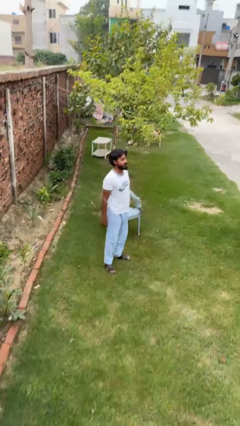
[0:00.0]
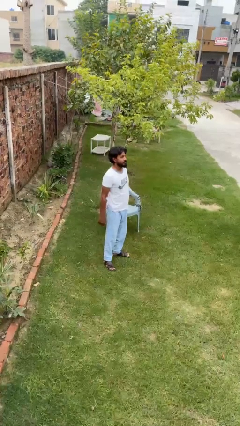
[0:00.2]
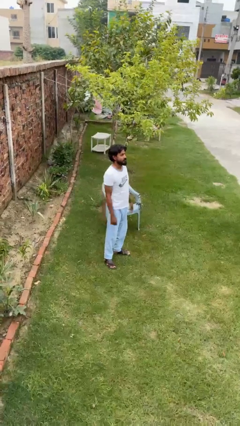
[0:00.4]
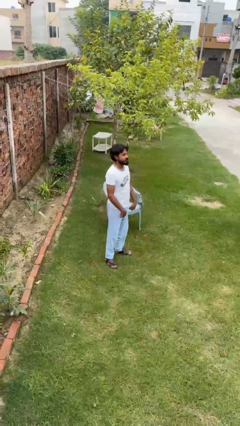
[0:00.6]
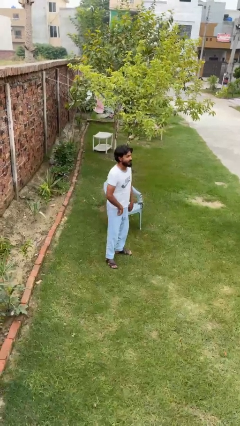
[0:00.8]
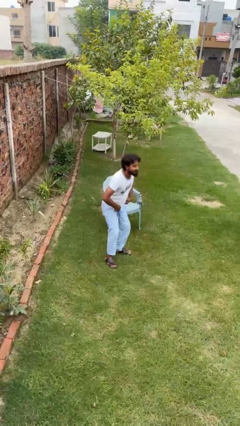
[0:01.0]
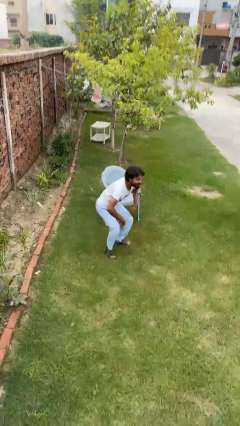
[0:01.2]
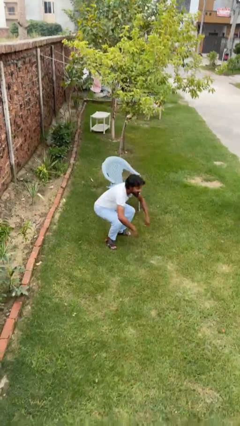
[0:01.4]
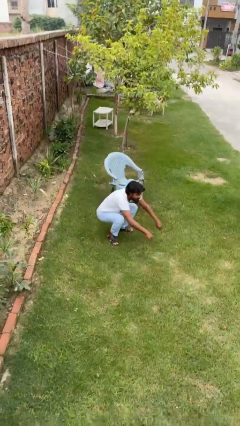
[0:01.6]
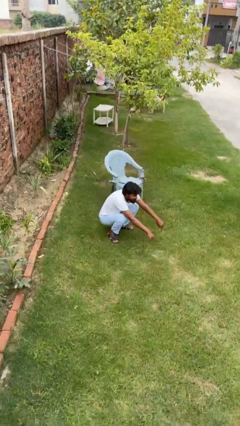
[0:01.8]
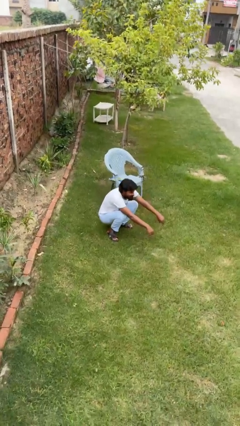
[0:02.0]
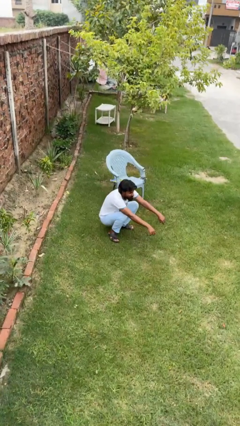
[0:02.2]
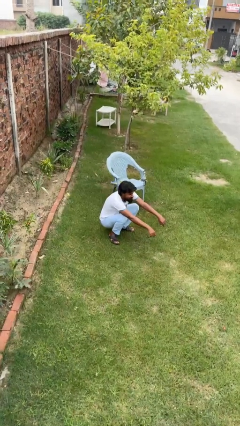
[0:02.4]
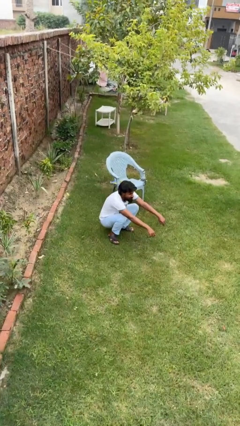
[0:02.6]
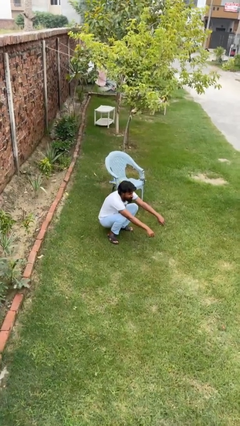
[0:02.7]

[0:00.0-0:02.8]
person squats

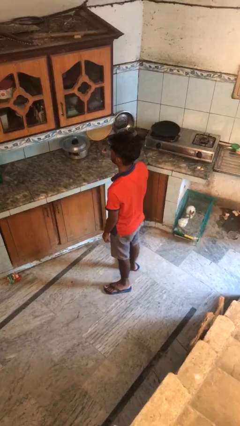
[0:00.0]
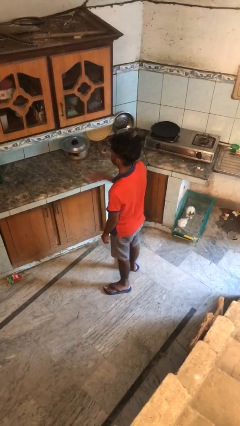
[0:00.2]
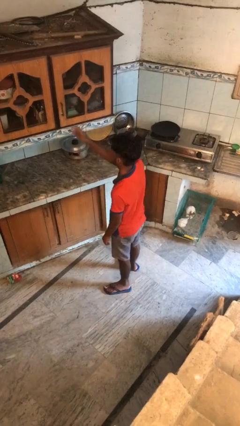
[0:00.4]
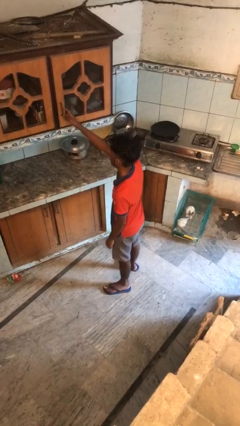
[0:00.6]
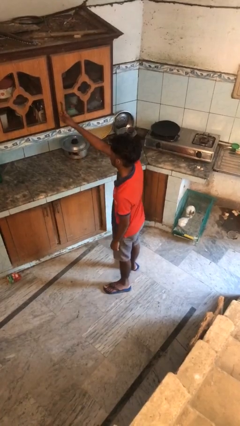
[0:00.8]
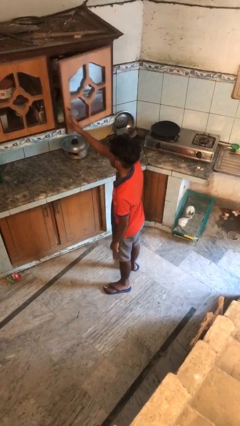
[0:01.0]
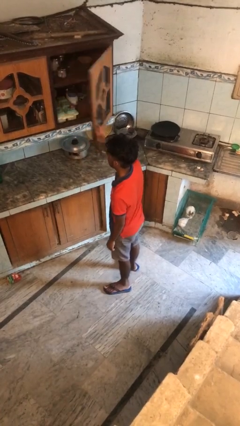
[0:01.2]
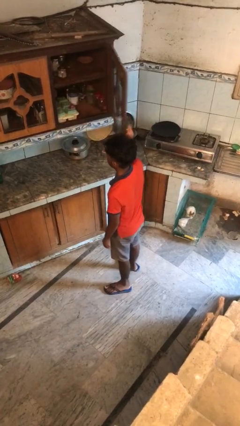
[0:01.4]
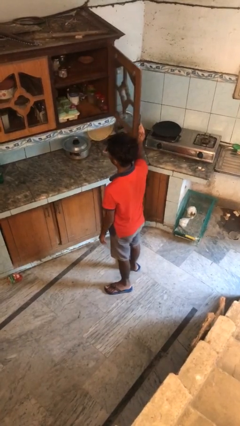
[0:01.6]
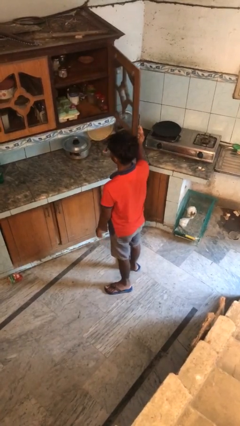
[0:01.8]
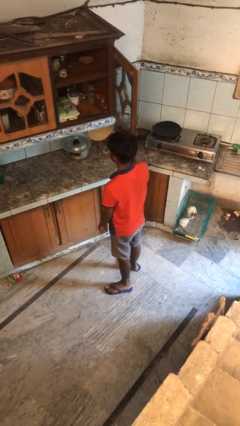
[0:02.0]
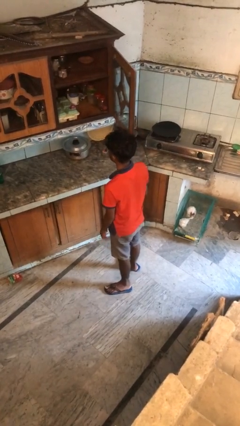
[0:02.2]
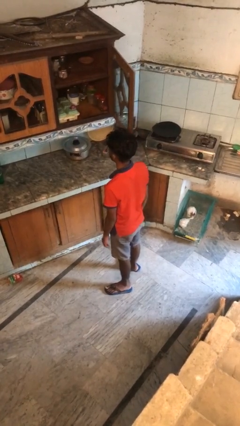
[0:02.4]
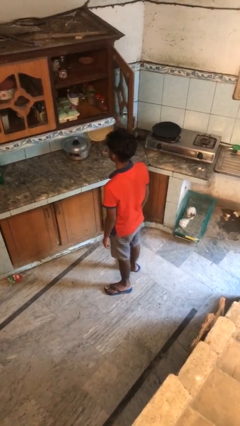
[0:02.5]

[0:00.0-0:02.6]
person opens cabinet

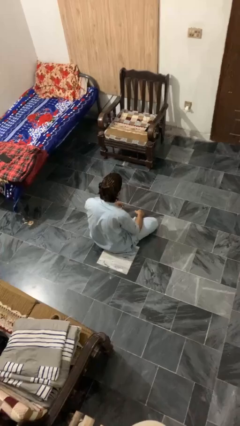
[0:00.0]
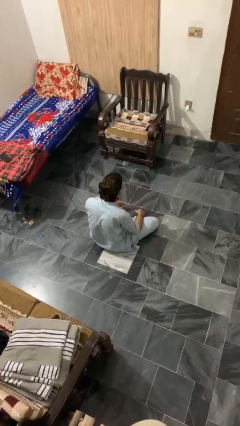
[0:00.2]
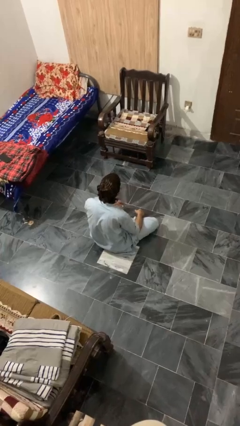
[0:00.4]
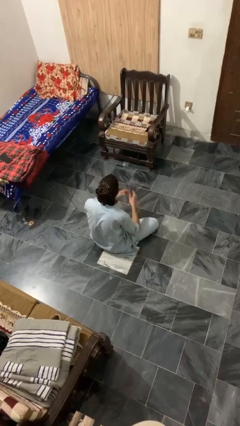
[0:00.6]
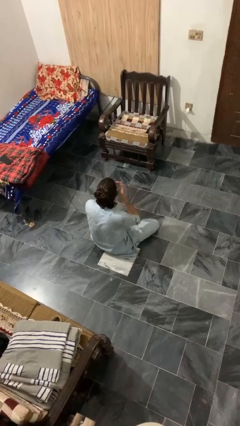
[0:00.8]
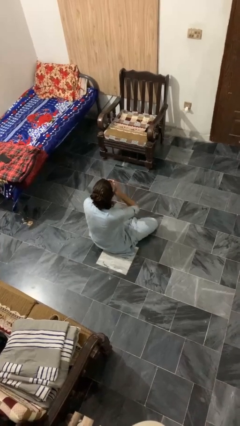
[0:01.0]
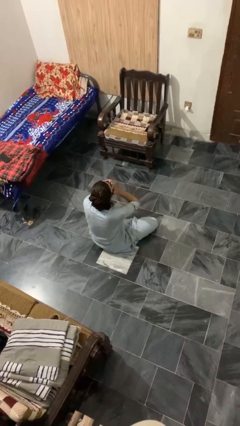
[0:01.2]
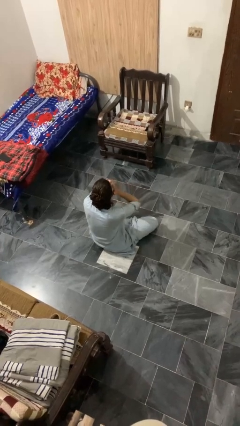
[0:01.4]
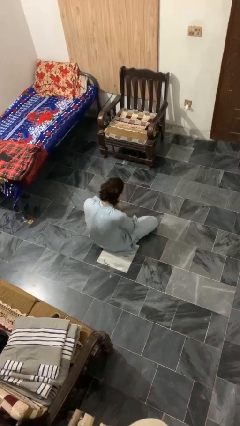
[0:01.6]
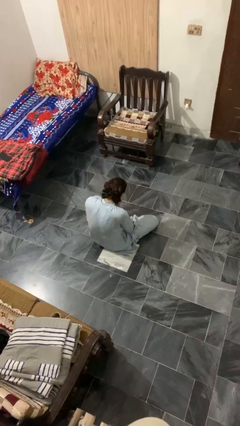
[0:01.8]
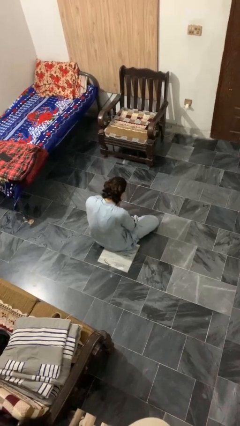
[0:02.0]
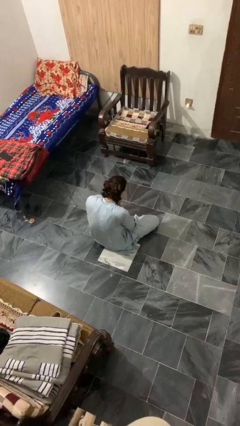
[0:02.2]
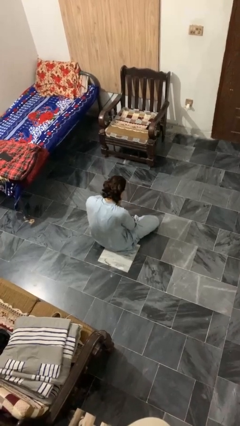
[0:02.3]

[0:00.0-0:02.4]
person sneezes into hand

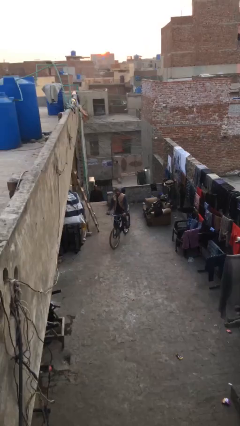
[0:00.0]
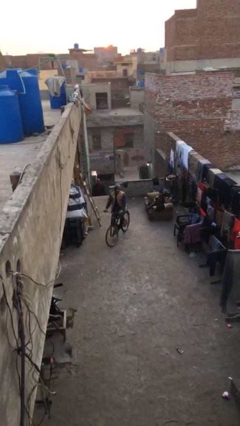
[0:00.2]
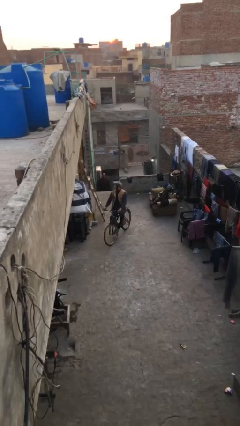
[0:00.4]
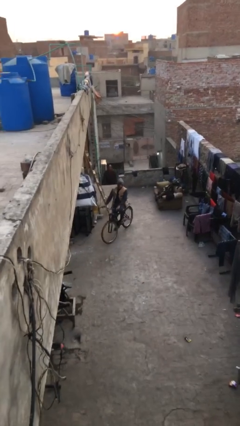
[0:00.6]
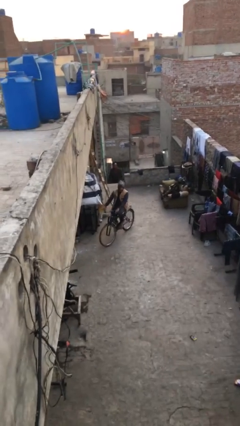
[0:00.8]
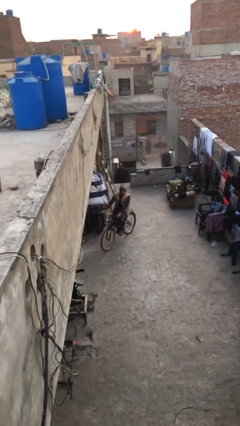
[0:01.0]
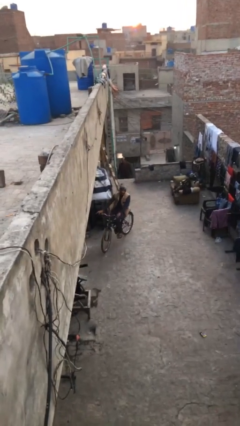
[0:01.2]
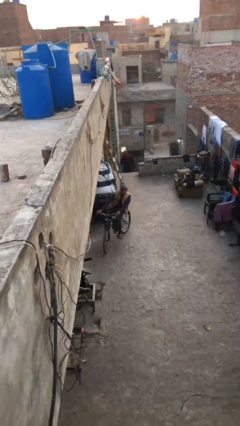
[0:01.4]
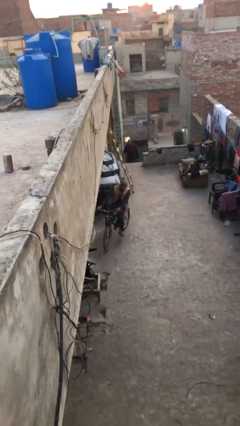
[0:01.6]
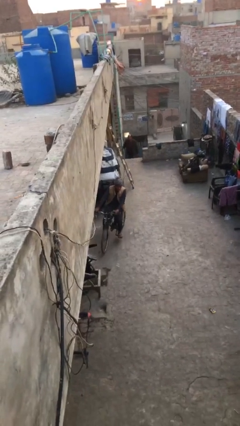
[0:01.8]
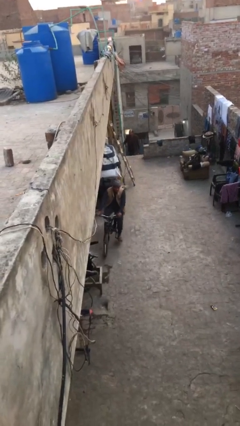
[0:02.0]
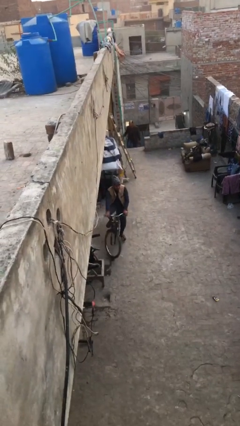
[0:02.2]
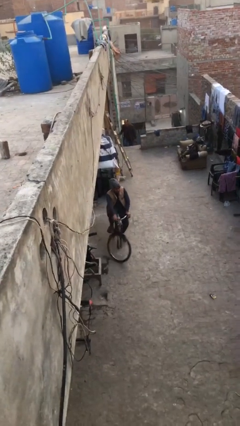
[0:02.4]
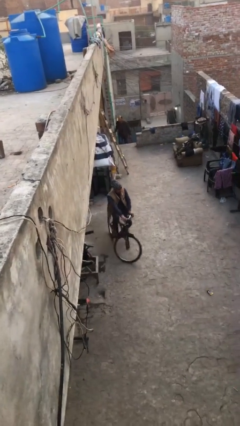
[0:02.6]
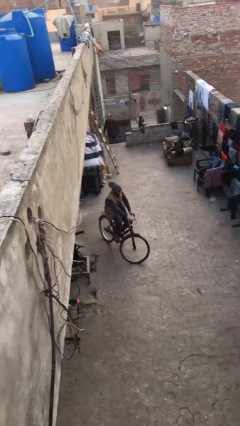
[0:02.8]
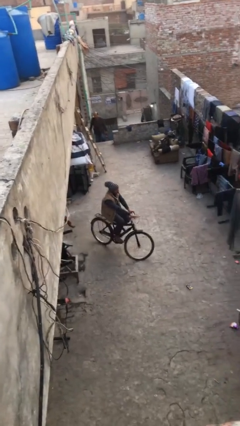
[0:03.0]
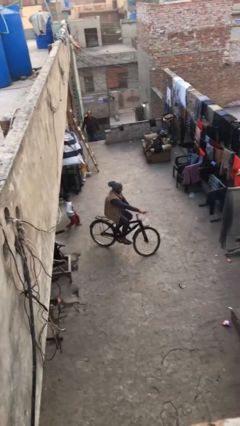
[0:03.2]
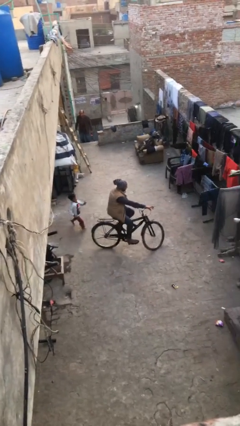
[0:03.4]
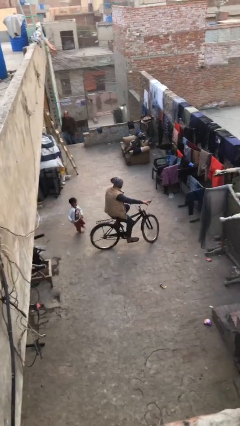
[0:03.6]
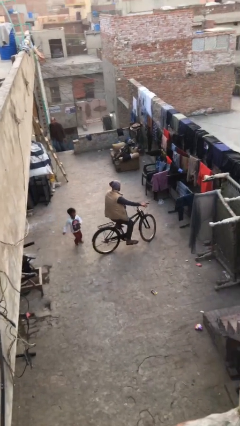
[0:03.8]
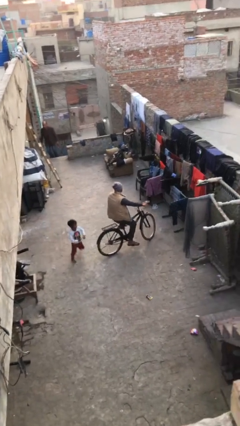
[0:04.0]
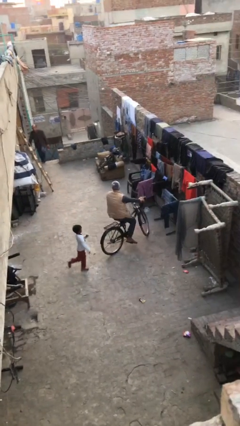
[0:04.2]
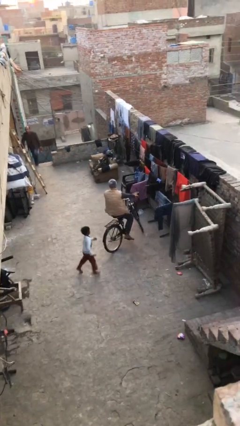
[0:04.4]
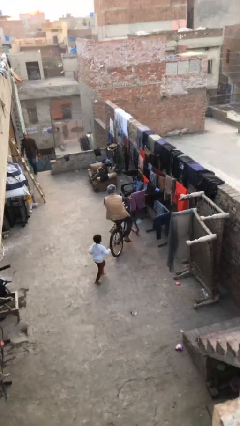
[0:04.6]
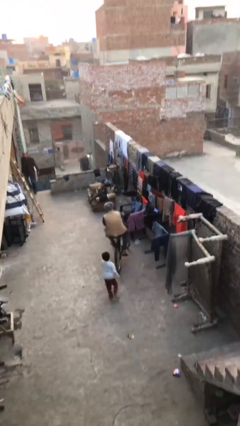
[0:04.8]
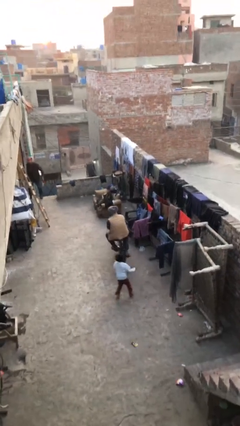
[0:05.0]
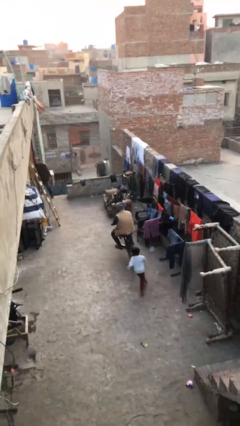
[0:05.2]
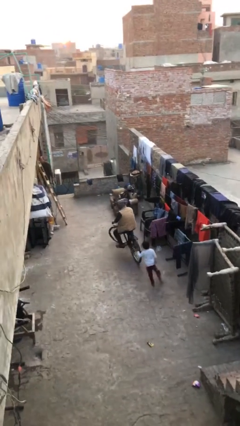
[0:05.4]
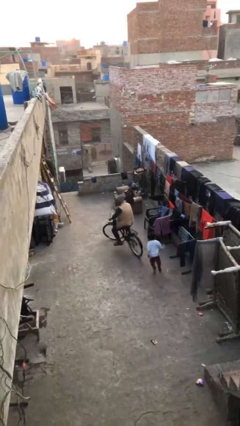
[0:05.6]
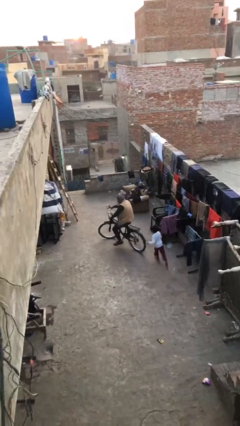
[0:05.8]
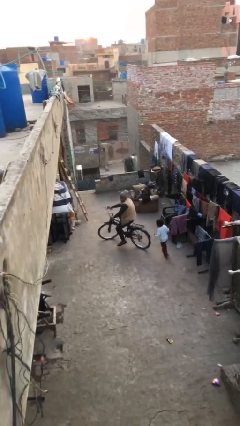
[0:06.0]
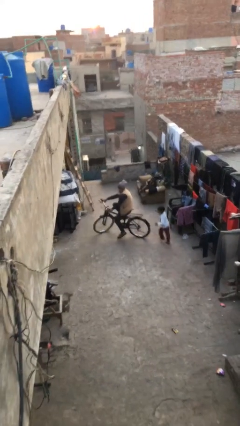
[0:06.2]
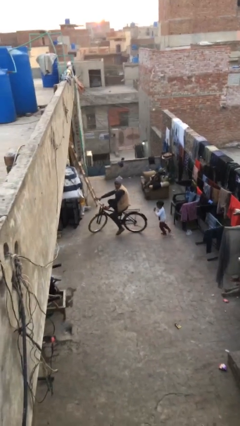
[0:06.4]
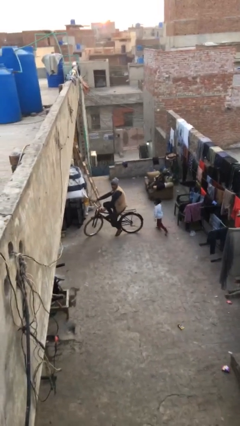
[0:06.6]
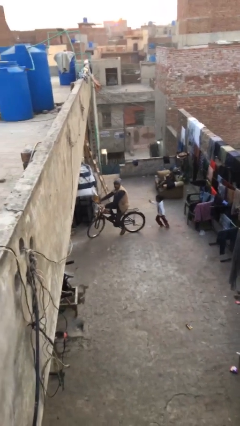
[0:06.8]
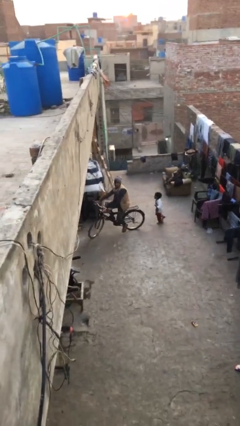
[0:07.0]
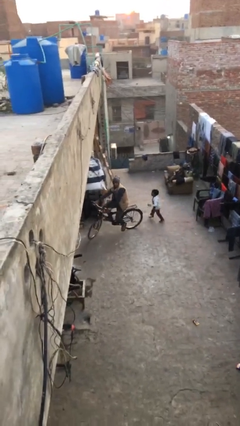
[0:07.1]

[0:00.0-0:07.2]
person rides bicycle

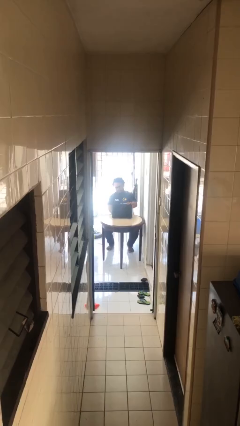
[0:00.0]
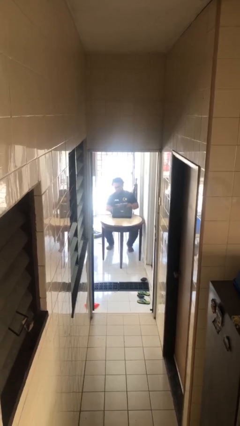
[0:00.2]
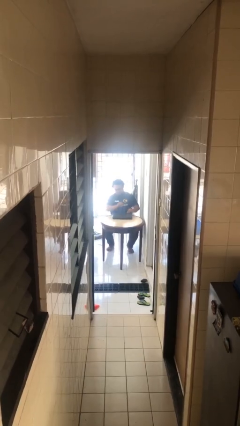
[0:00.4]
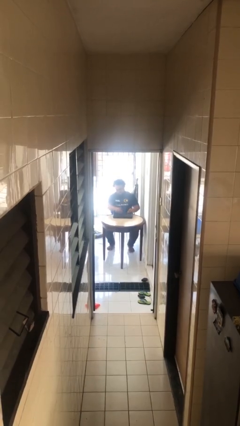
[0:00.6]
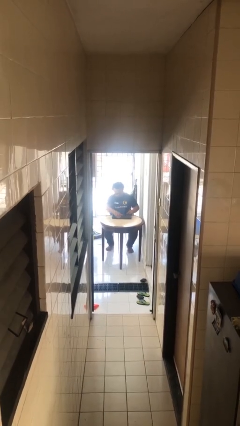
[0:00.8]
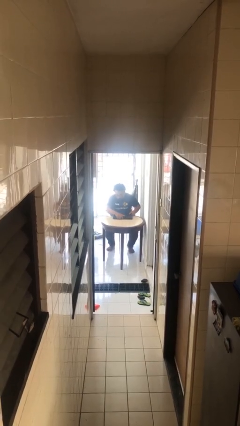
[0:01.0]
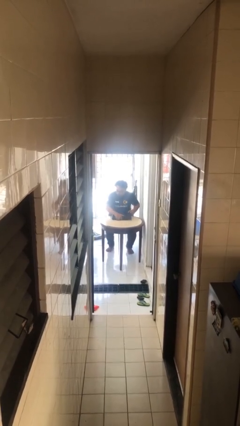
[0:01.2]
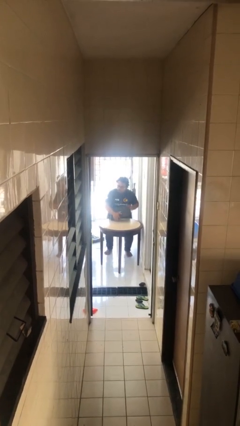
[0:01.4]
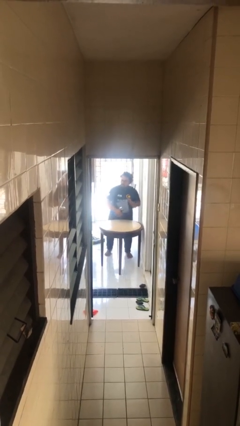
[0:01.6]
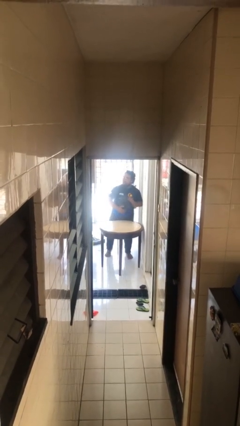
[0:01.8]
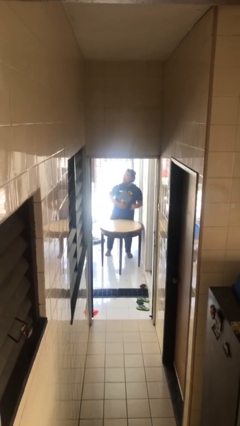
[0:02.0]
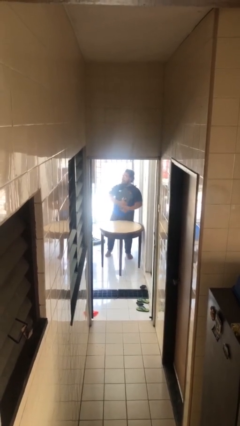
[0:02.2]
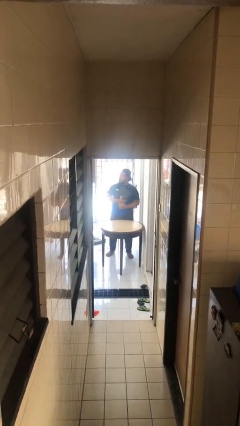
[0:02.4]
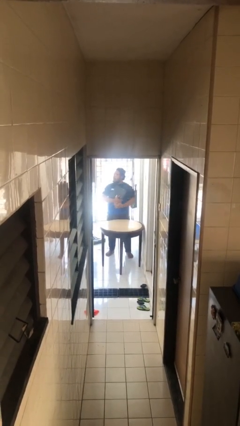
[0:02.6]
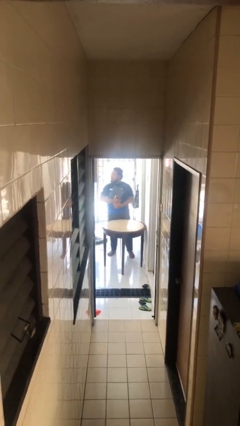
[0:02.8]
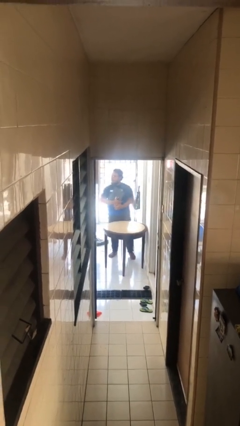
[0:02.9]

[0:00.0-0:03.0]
person stands up
